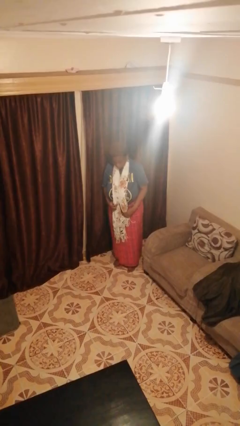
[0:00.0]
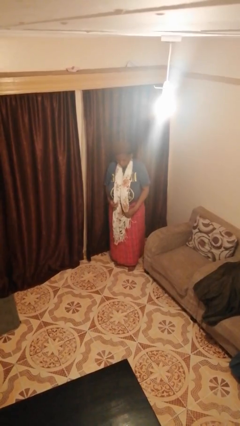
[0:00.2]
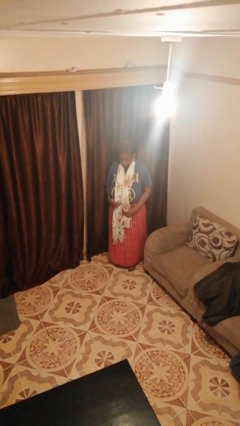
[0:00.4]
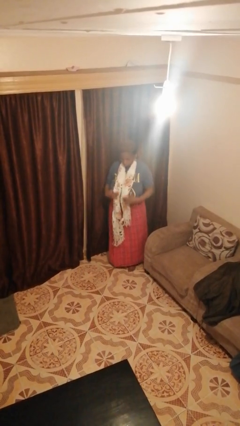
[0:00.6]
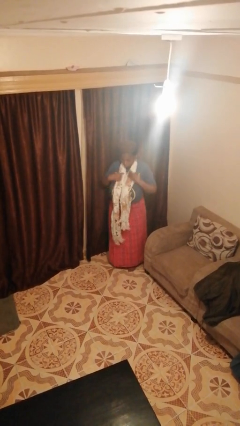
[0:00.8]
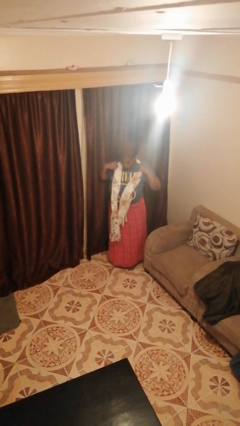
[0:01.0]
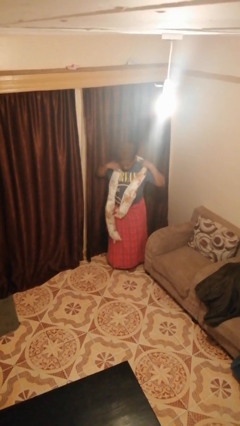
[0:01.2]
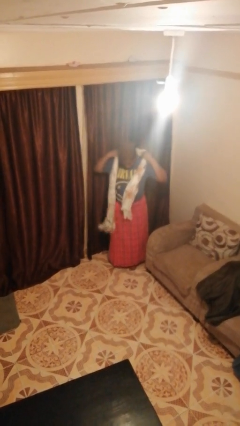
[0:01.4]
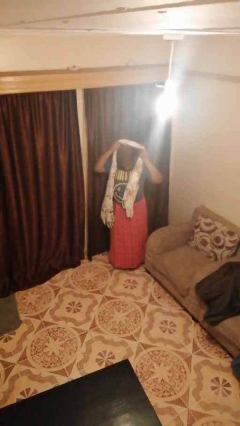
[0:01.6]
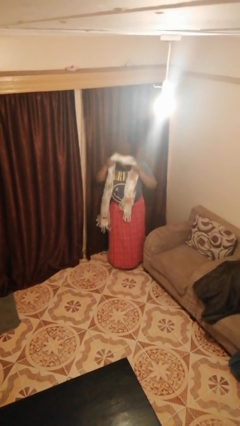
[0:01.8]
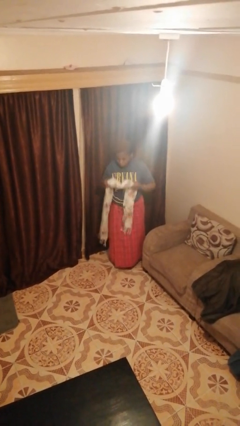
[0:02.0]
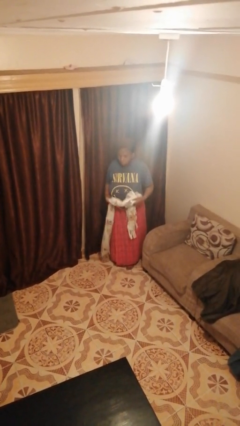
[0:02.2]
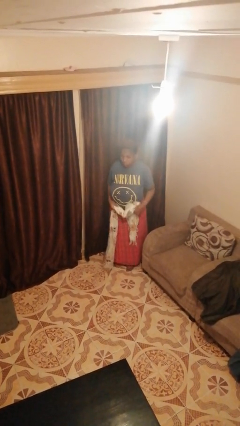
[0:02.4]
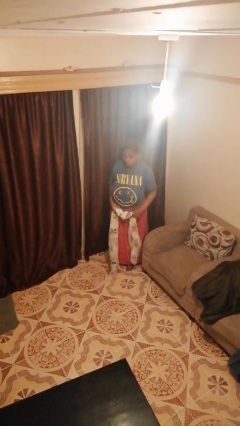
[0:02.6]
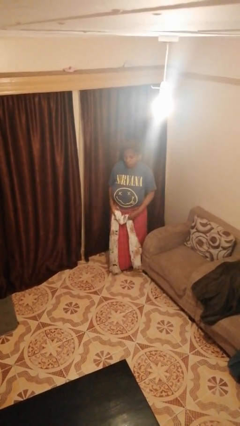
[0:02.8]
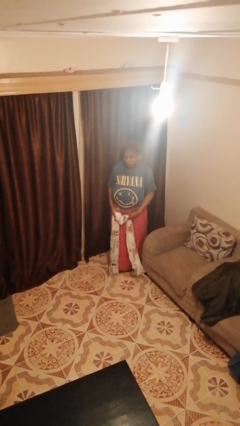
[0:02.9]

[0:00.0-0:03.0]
person takes off scarf

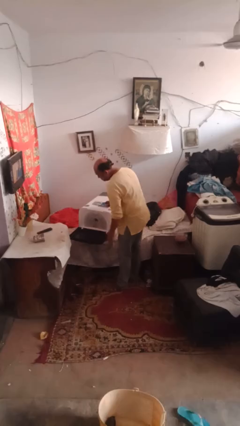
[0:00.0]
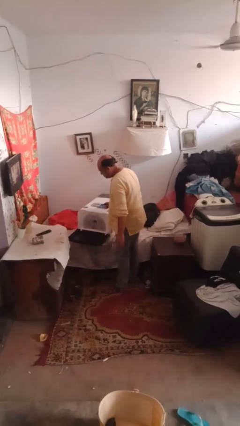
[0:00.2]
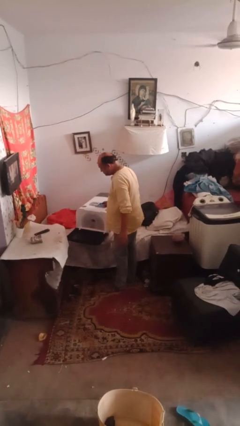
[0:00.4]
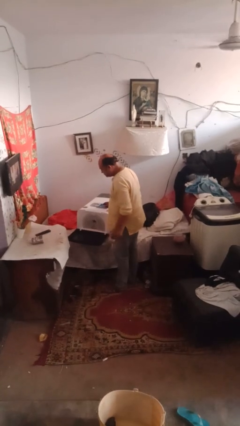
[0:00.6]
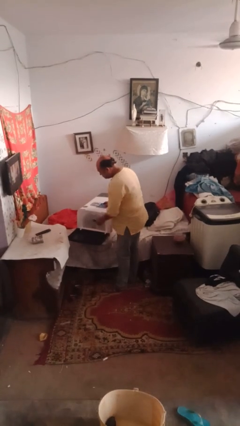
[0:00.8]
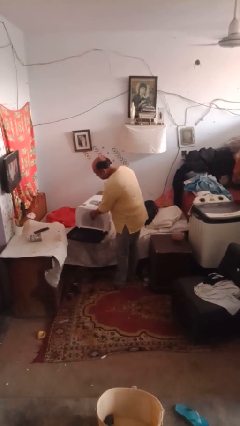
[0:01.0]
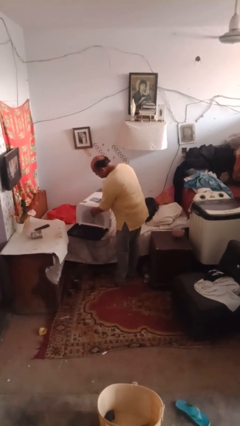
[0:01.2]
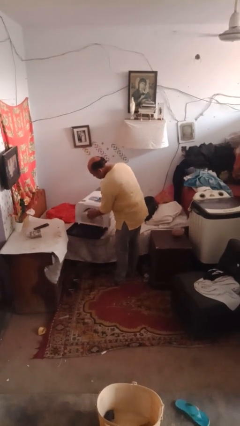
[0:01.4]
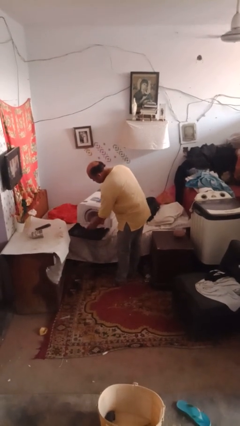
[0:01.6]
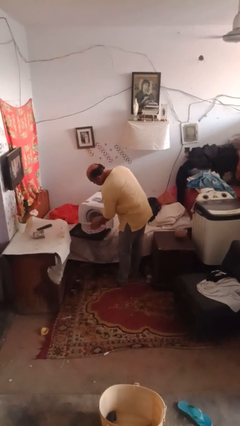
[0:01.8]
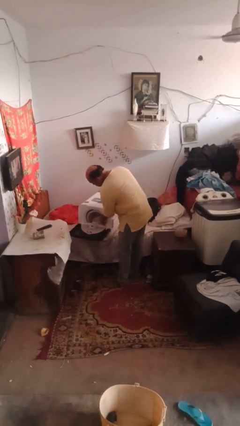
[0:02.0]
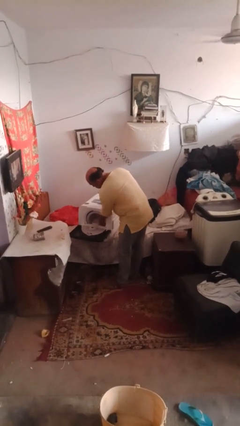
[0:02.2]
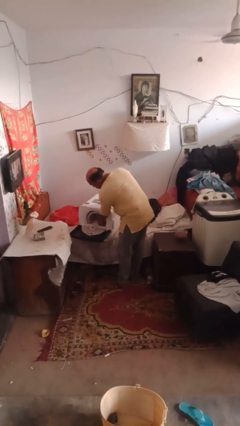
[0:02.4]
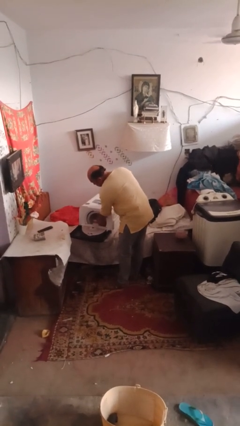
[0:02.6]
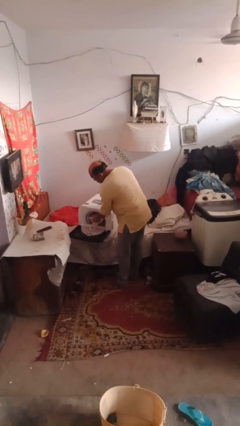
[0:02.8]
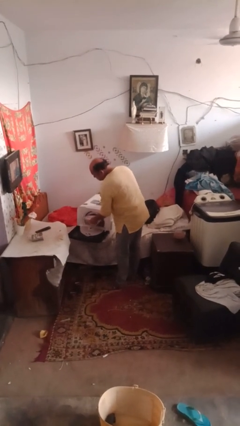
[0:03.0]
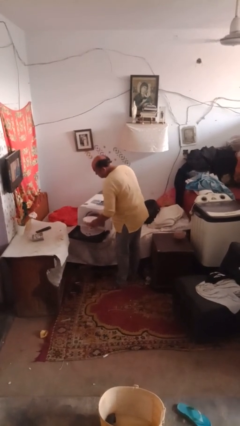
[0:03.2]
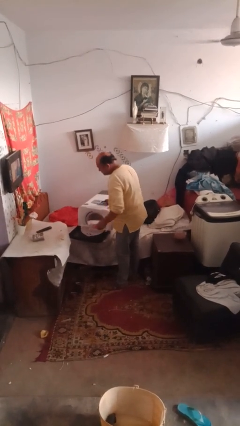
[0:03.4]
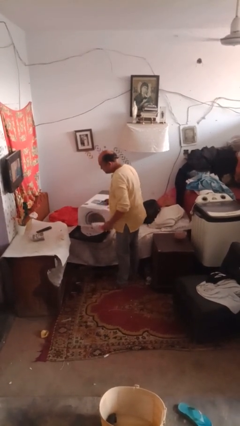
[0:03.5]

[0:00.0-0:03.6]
person unloads dishwasher

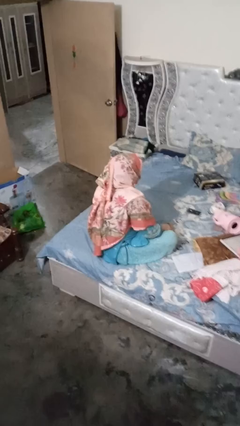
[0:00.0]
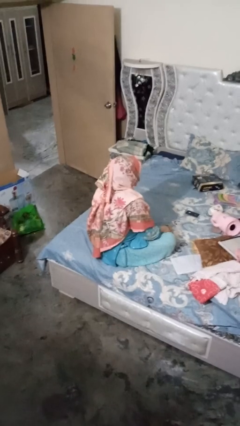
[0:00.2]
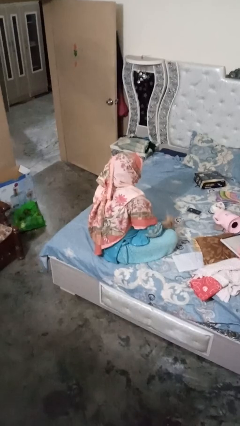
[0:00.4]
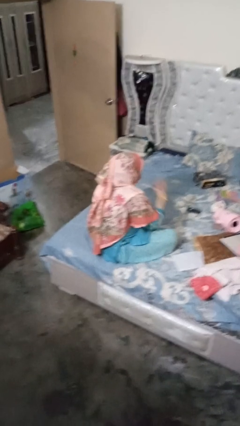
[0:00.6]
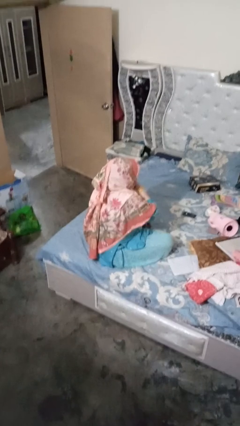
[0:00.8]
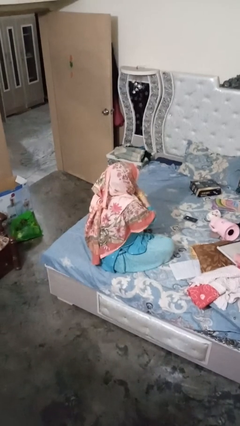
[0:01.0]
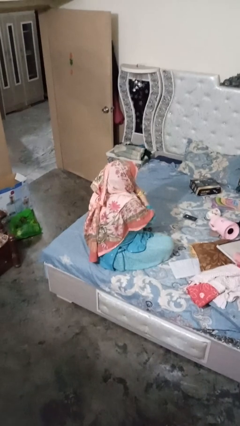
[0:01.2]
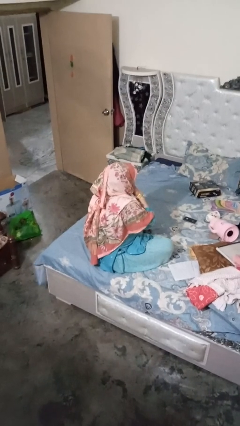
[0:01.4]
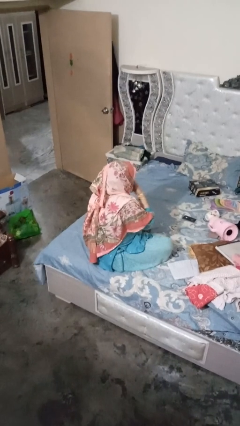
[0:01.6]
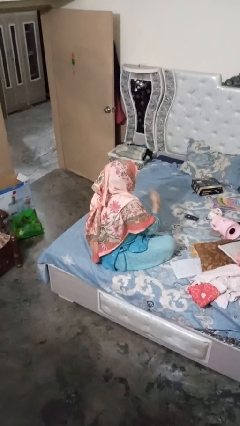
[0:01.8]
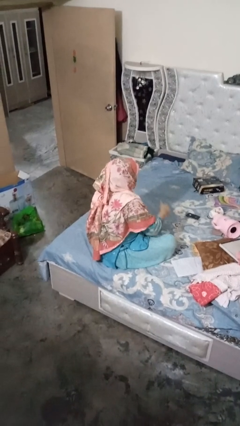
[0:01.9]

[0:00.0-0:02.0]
person strokes chin

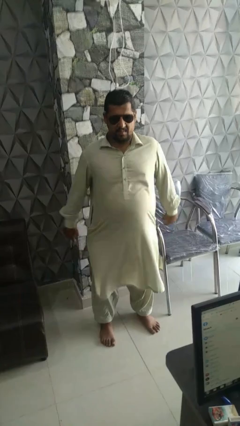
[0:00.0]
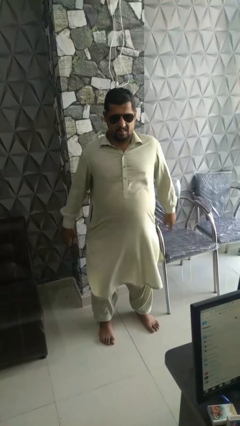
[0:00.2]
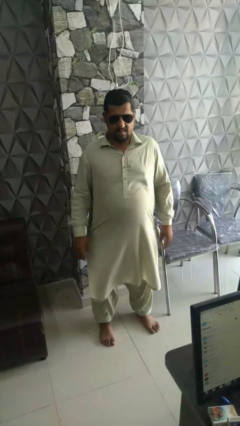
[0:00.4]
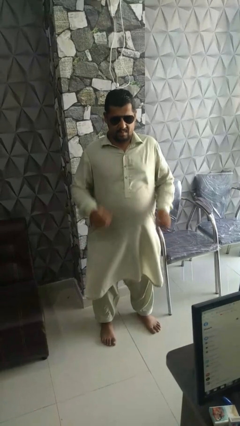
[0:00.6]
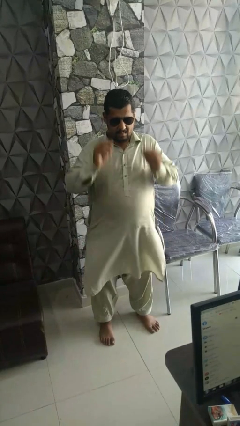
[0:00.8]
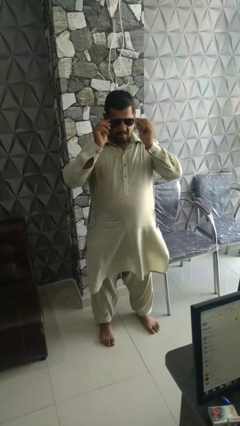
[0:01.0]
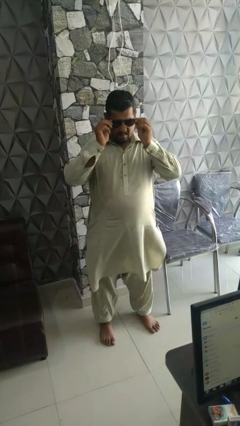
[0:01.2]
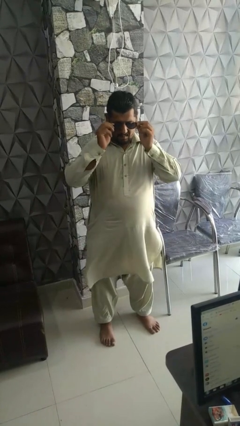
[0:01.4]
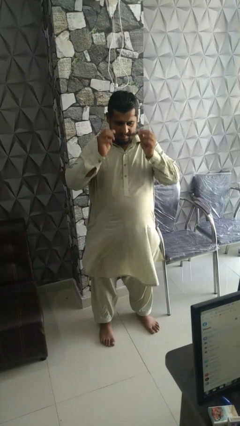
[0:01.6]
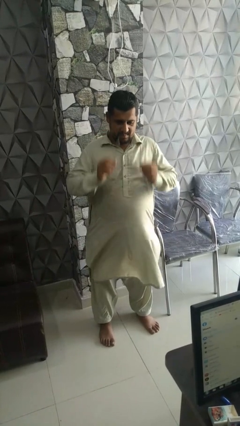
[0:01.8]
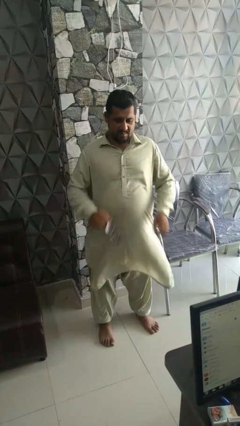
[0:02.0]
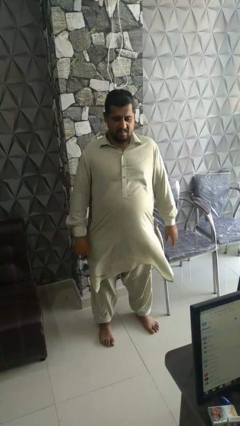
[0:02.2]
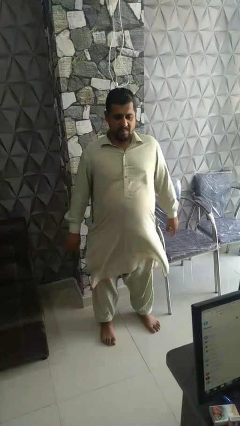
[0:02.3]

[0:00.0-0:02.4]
person takes off sunglasses

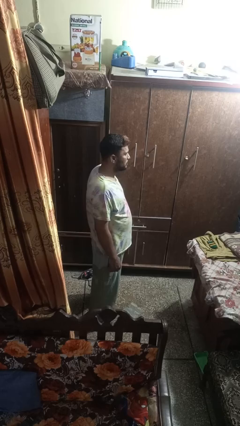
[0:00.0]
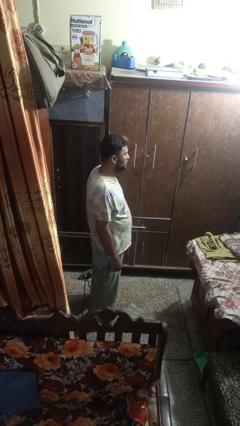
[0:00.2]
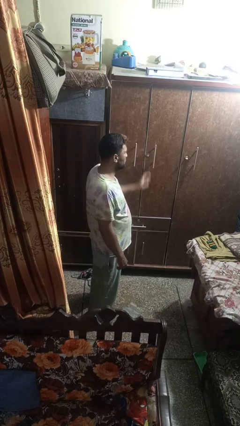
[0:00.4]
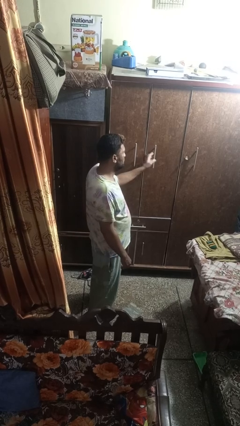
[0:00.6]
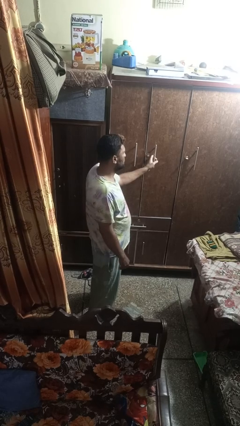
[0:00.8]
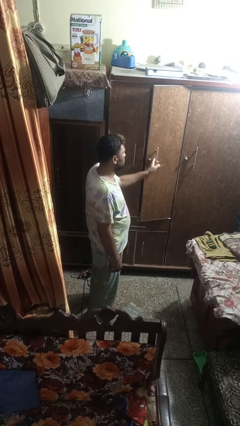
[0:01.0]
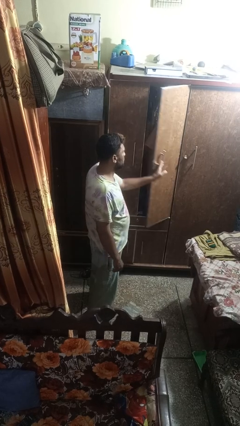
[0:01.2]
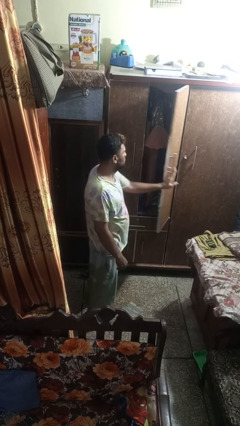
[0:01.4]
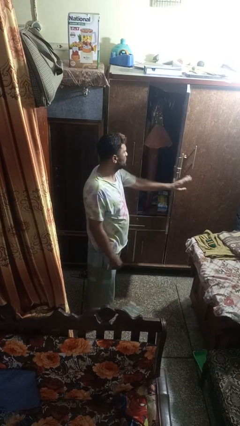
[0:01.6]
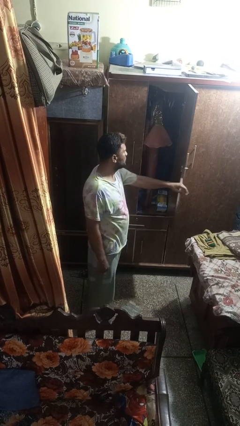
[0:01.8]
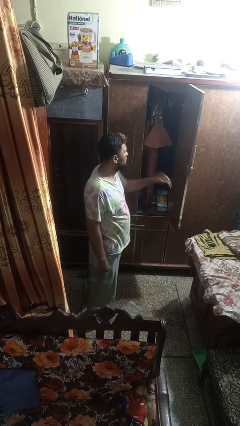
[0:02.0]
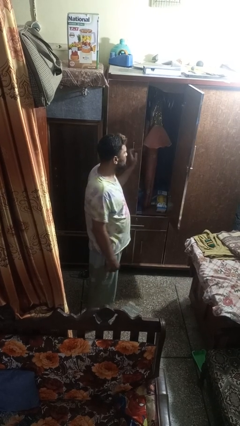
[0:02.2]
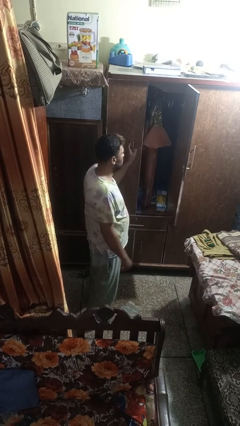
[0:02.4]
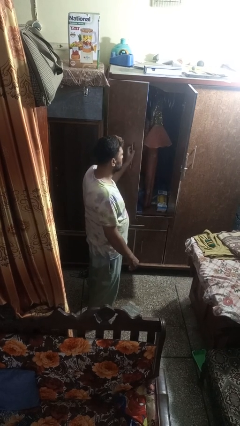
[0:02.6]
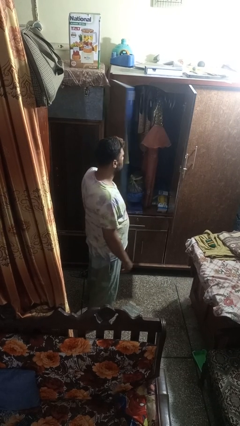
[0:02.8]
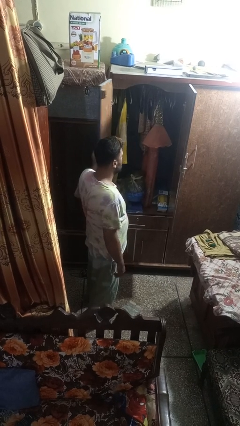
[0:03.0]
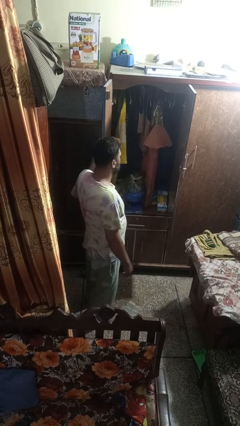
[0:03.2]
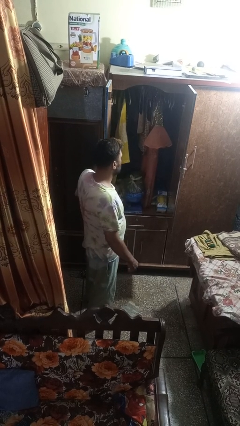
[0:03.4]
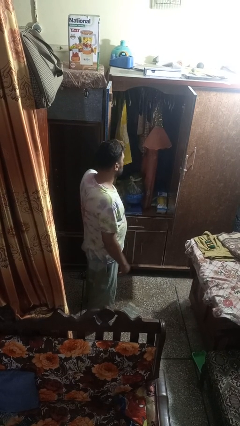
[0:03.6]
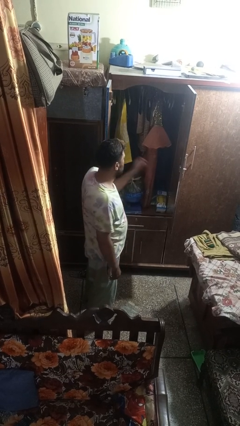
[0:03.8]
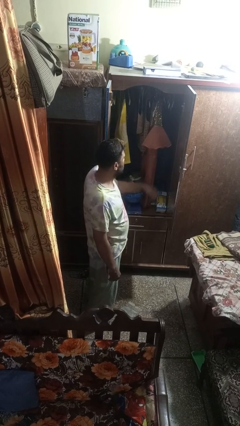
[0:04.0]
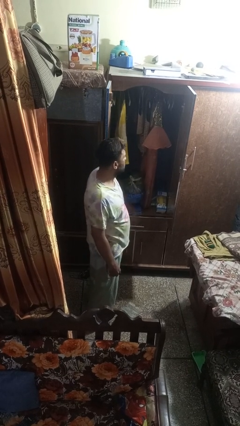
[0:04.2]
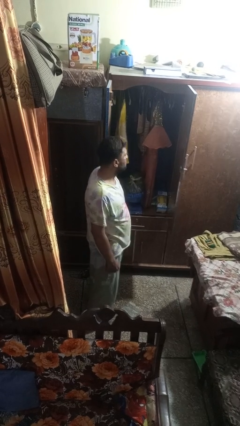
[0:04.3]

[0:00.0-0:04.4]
person opens closet door

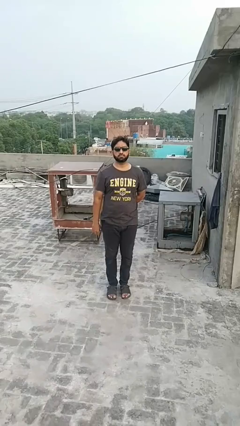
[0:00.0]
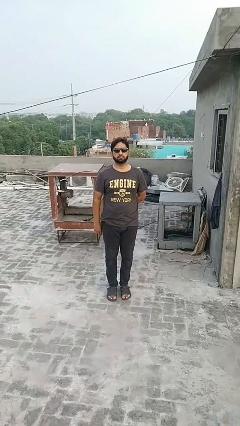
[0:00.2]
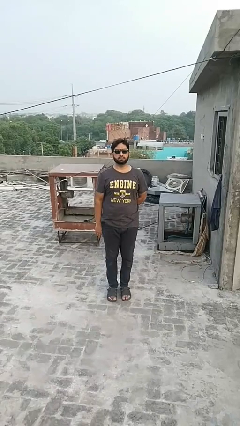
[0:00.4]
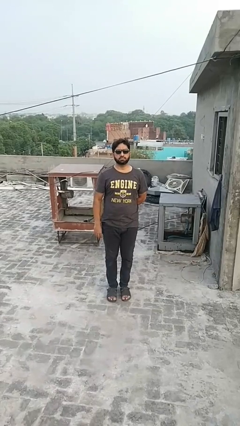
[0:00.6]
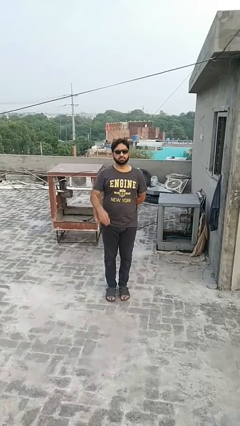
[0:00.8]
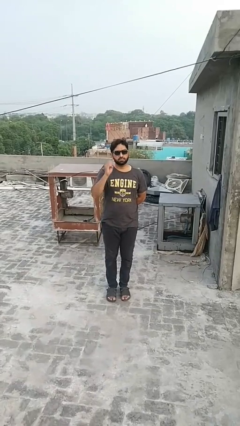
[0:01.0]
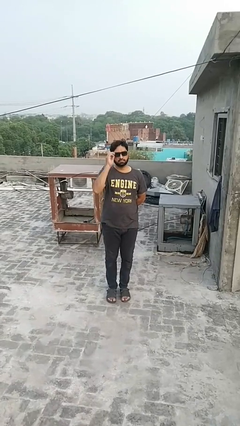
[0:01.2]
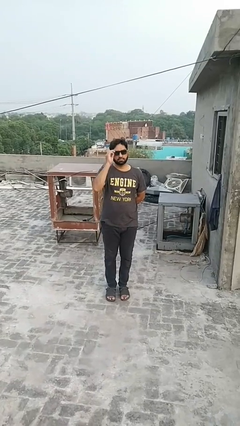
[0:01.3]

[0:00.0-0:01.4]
person takes off glasses

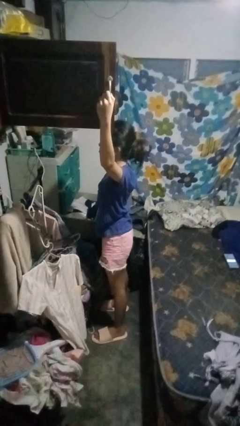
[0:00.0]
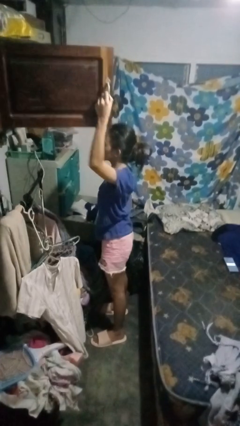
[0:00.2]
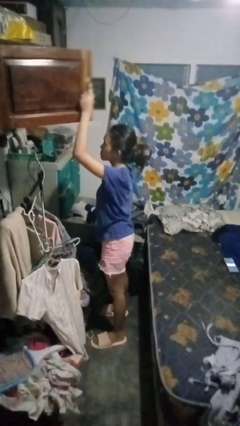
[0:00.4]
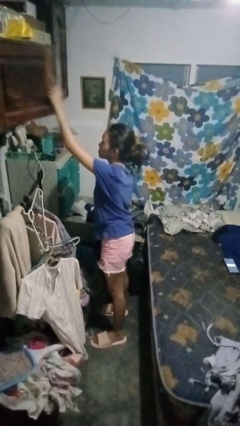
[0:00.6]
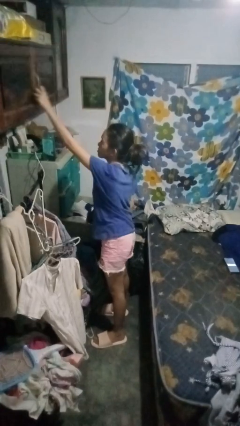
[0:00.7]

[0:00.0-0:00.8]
person closes closet door
